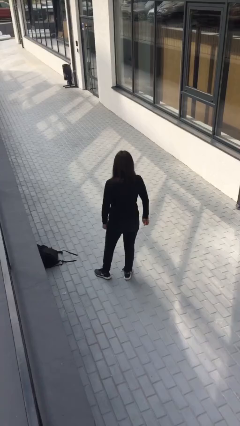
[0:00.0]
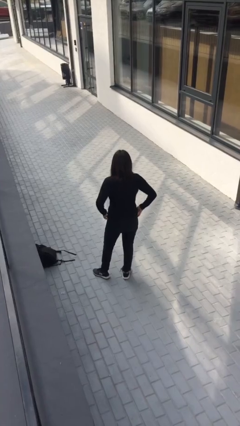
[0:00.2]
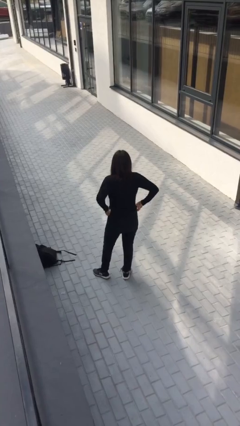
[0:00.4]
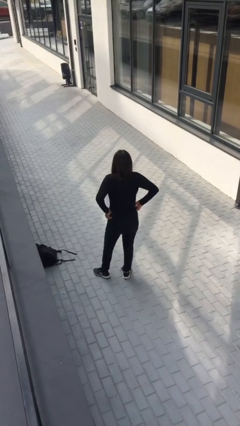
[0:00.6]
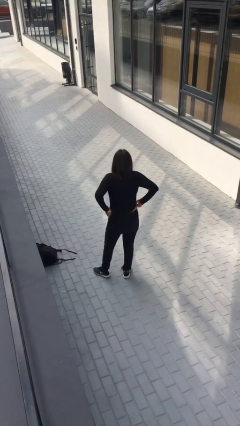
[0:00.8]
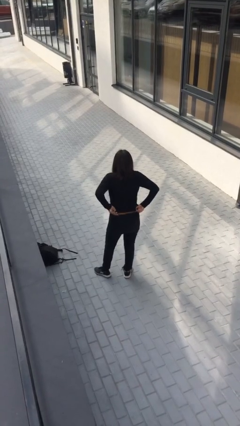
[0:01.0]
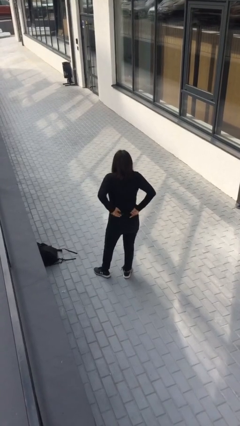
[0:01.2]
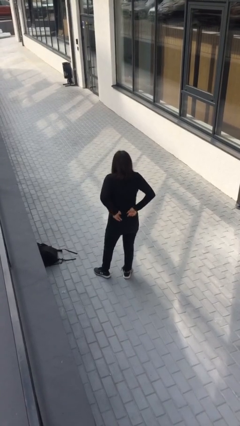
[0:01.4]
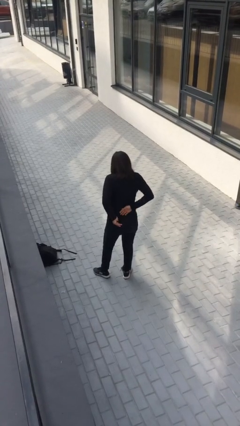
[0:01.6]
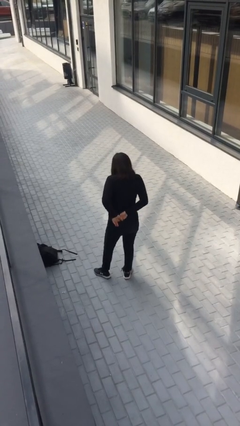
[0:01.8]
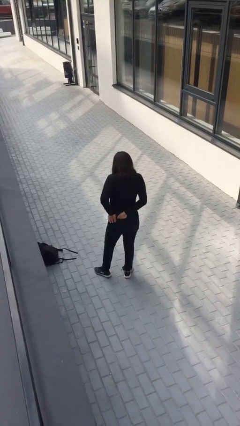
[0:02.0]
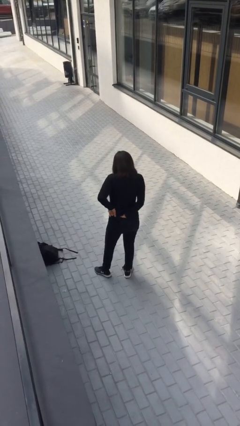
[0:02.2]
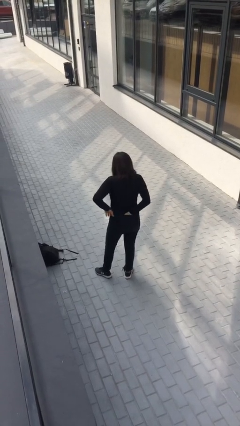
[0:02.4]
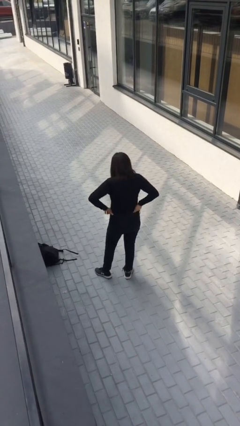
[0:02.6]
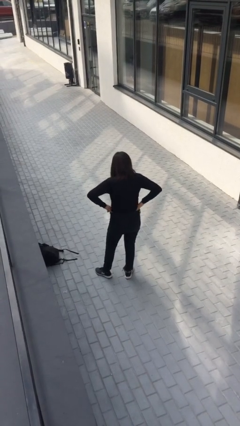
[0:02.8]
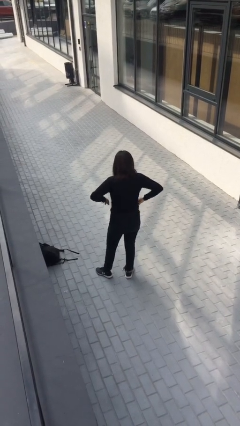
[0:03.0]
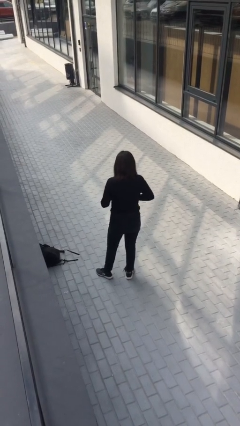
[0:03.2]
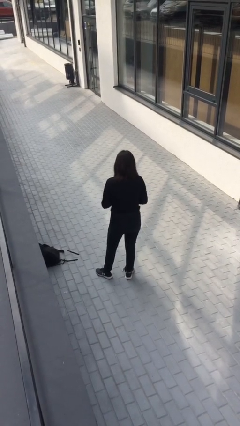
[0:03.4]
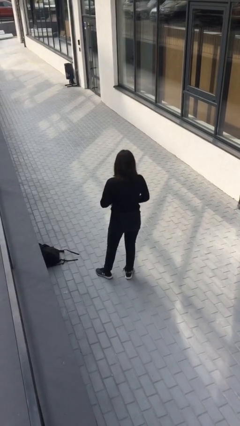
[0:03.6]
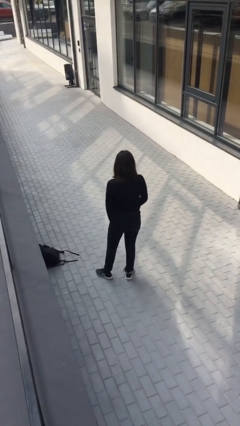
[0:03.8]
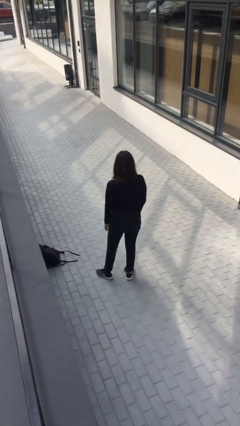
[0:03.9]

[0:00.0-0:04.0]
person tucks in shirt

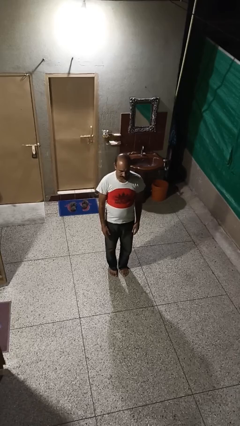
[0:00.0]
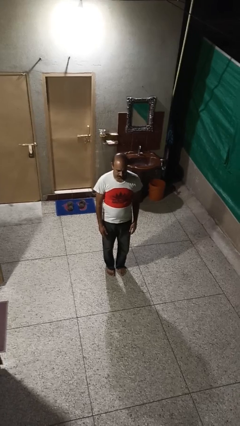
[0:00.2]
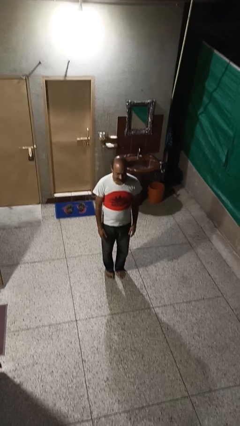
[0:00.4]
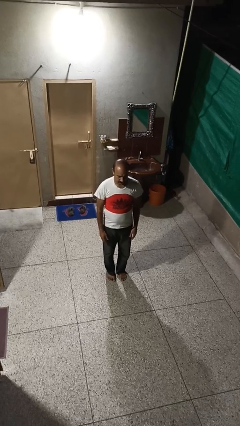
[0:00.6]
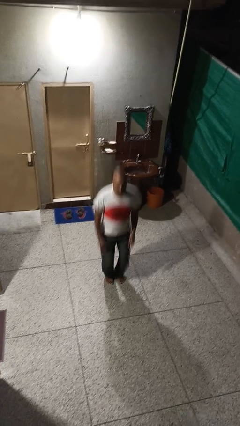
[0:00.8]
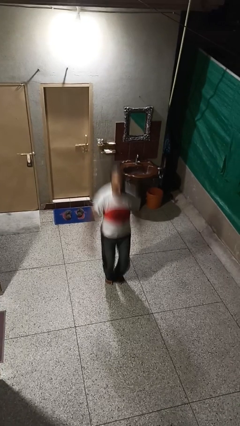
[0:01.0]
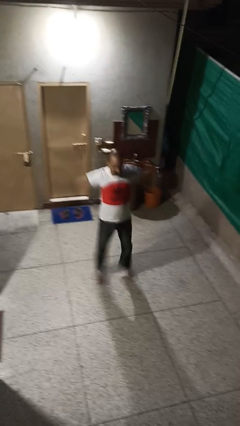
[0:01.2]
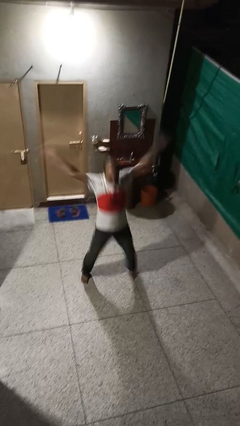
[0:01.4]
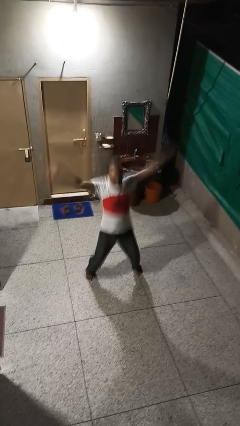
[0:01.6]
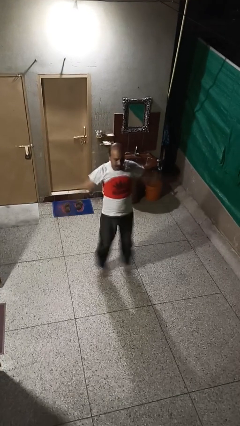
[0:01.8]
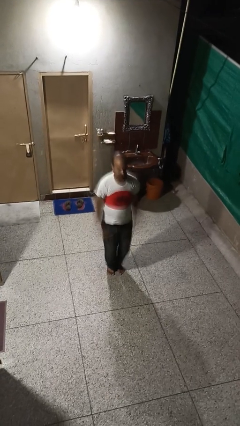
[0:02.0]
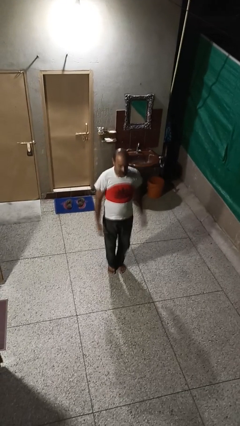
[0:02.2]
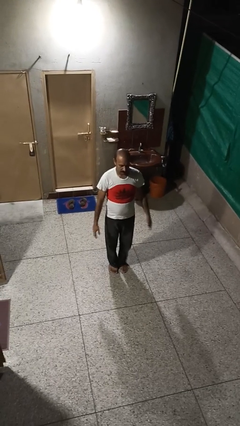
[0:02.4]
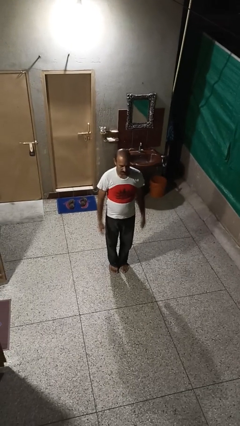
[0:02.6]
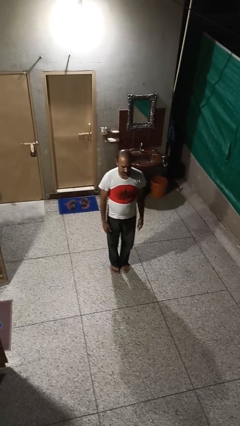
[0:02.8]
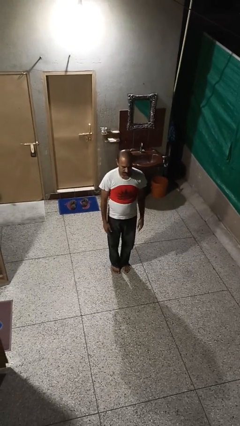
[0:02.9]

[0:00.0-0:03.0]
person exercises with jumping jacks

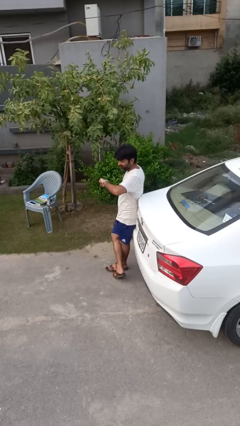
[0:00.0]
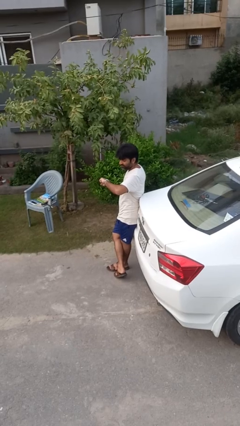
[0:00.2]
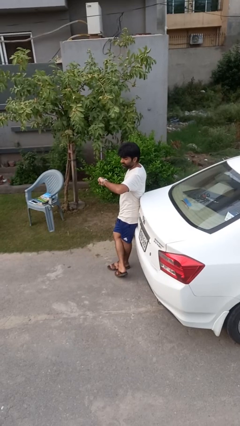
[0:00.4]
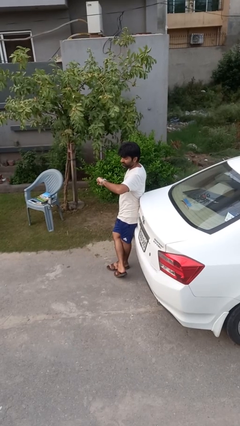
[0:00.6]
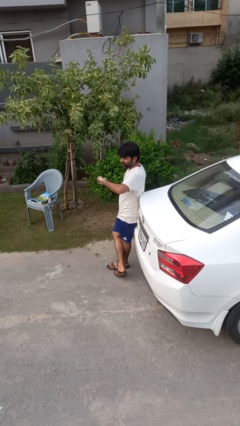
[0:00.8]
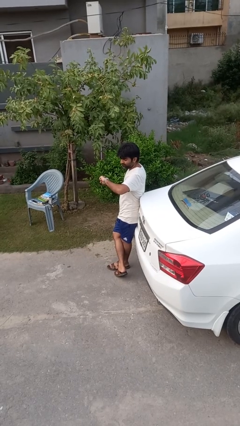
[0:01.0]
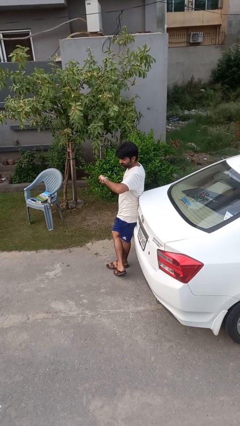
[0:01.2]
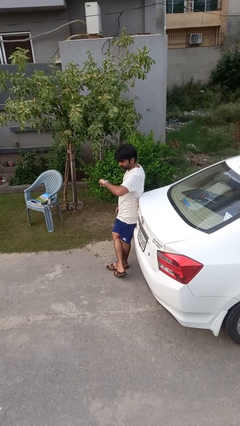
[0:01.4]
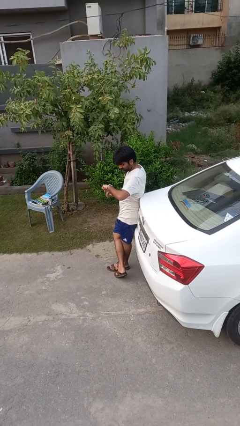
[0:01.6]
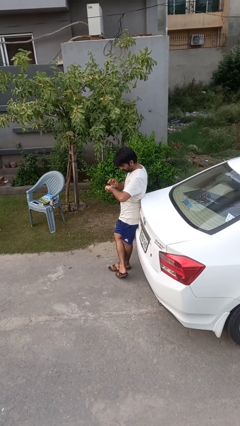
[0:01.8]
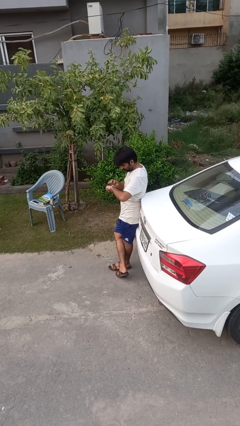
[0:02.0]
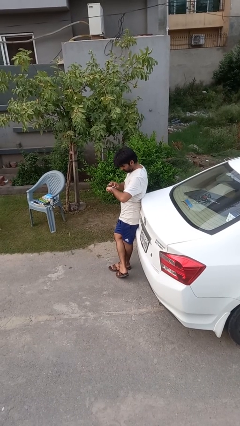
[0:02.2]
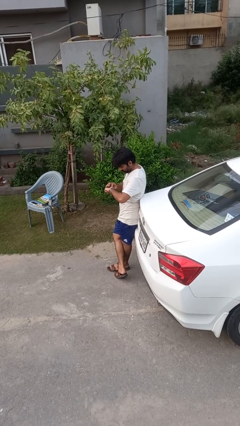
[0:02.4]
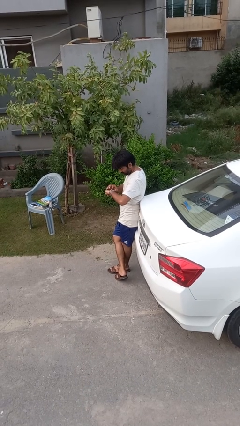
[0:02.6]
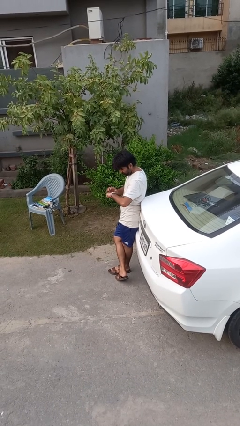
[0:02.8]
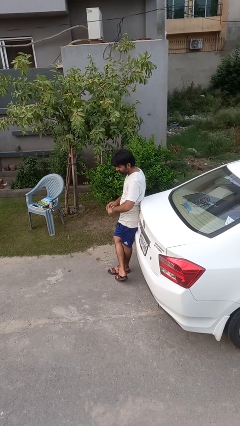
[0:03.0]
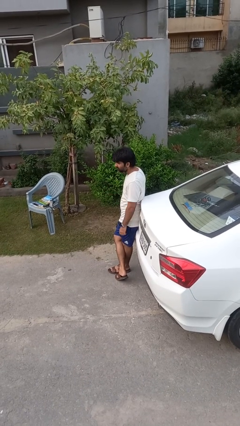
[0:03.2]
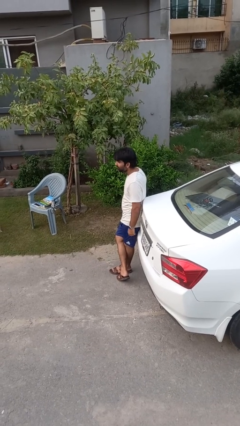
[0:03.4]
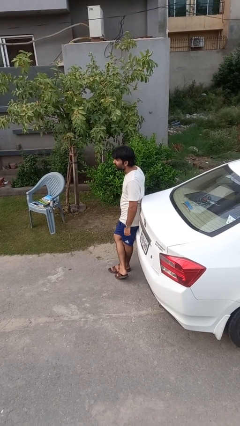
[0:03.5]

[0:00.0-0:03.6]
person looks at wristwatch

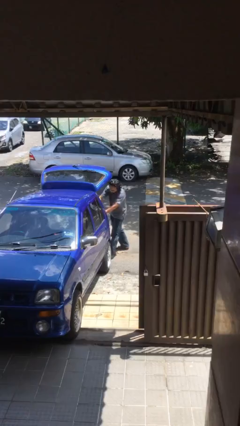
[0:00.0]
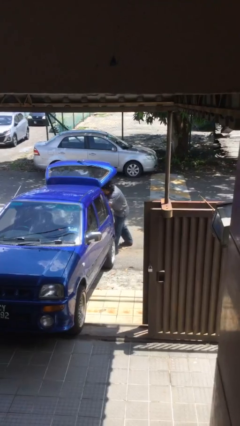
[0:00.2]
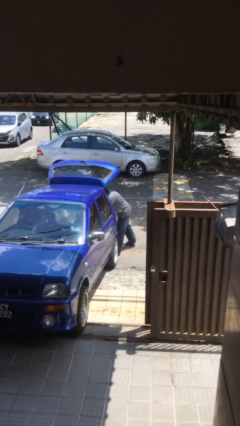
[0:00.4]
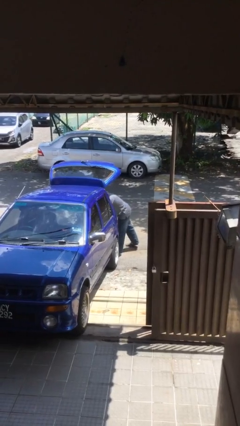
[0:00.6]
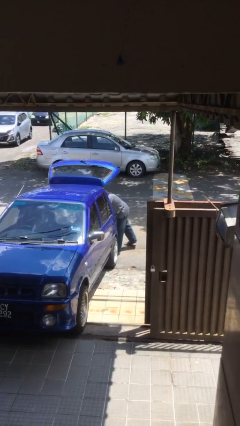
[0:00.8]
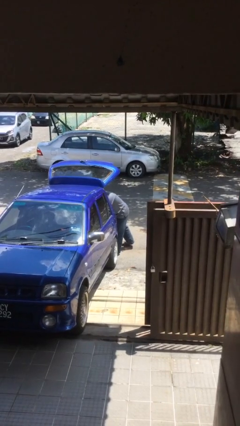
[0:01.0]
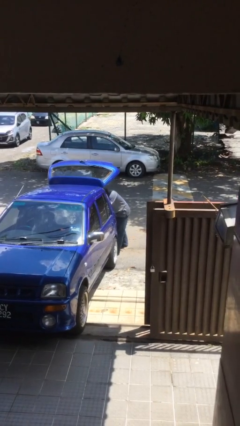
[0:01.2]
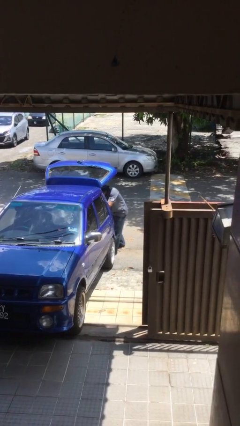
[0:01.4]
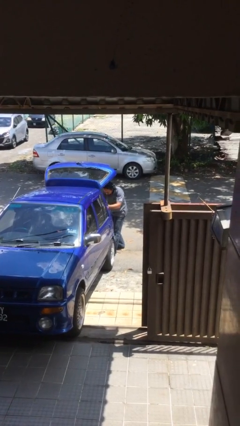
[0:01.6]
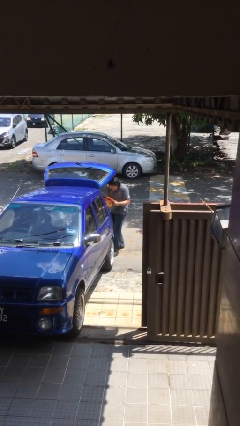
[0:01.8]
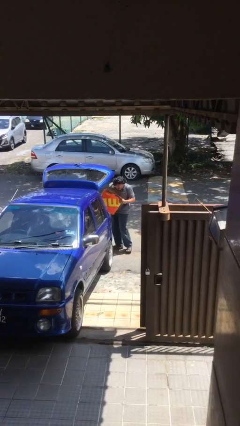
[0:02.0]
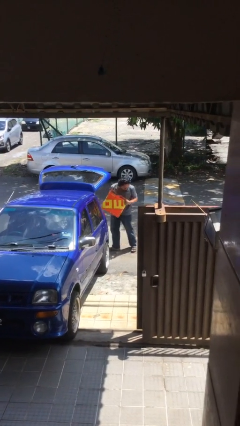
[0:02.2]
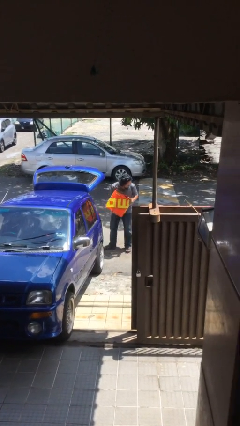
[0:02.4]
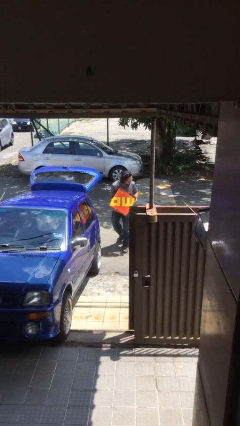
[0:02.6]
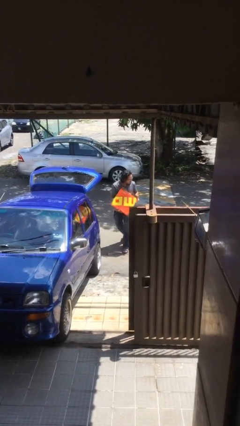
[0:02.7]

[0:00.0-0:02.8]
person unloads car

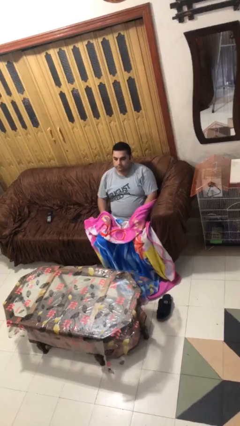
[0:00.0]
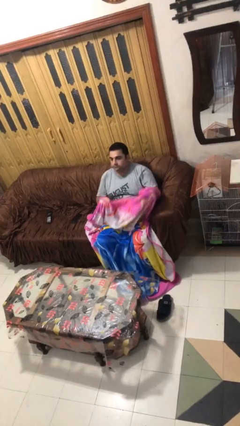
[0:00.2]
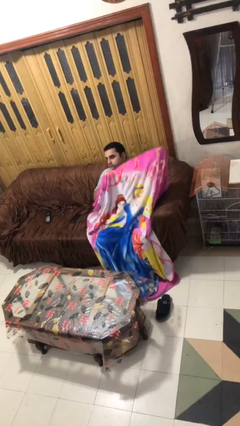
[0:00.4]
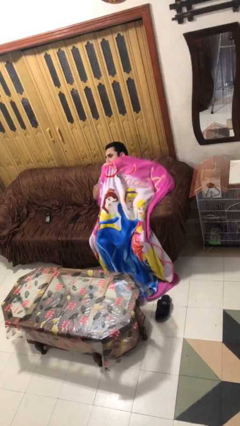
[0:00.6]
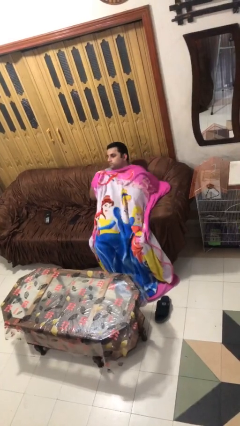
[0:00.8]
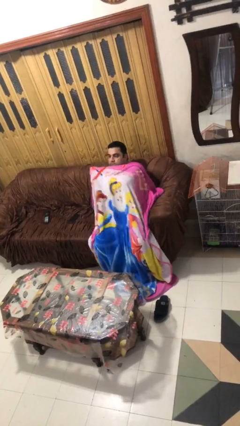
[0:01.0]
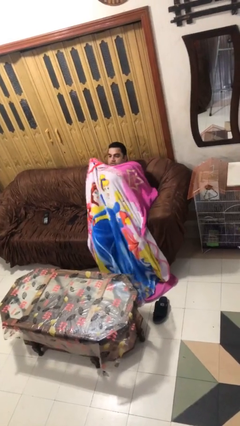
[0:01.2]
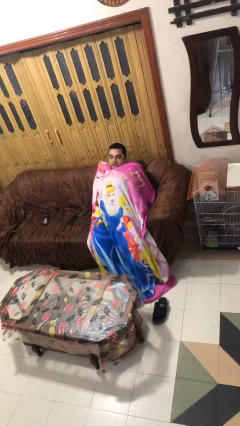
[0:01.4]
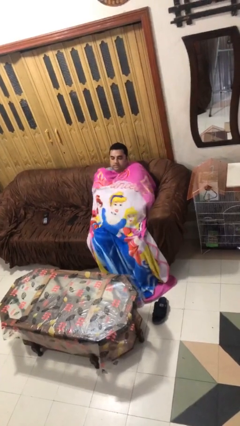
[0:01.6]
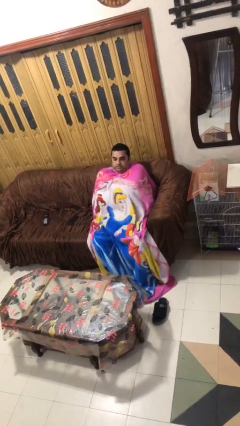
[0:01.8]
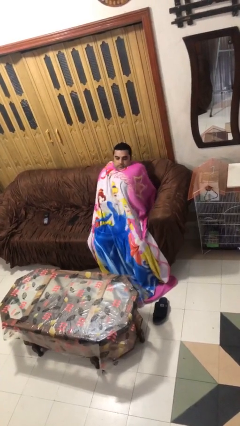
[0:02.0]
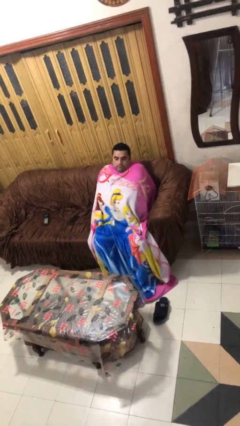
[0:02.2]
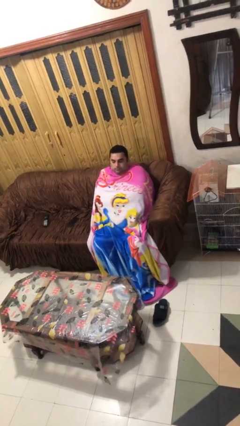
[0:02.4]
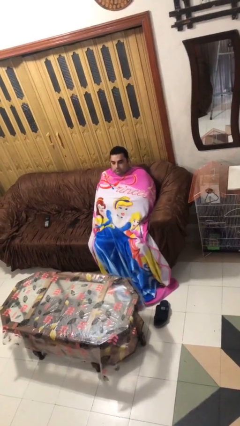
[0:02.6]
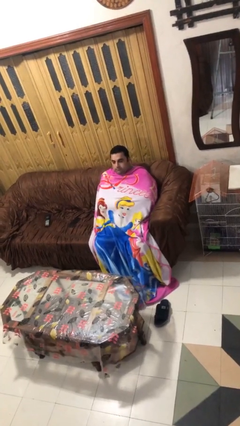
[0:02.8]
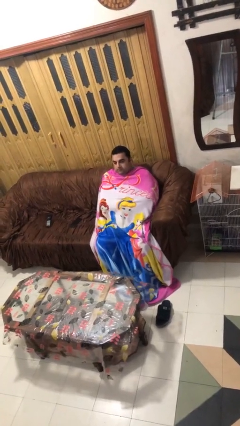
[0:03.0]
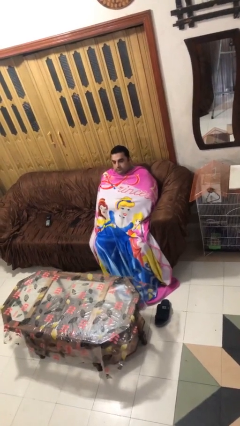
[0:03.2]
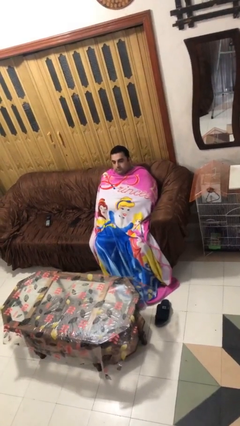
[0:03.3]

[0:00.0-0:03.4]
person covers with blanket

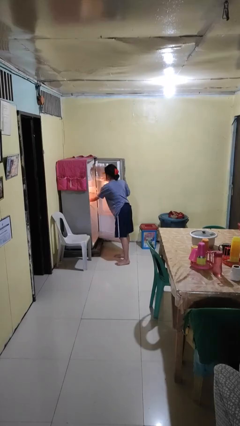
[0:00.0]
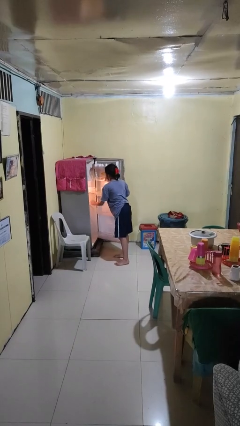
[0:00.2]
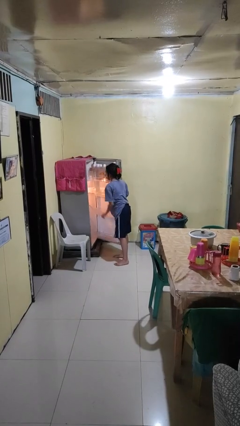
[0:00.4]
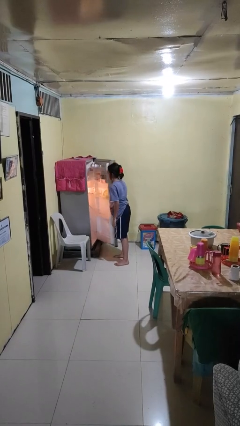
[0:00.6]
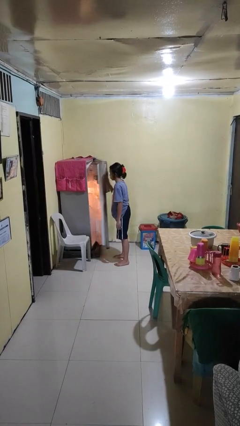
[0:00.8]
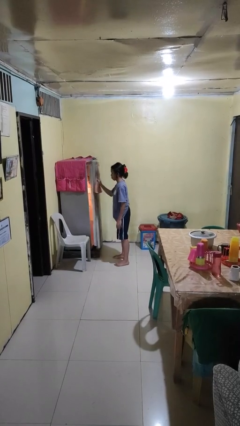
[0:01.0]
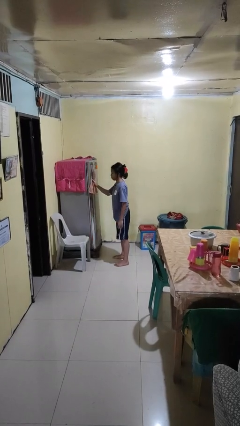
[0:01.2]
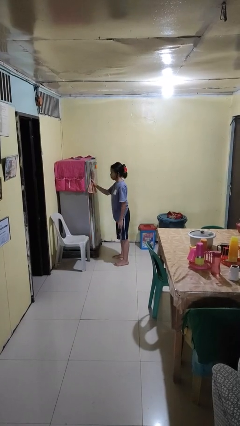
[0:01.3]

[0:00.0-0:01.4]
person closes refrigerator
